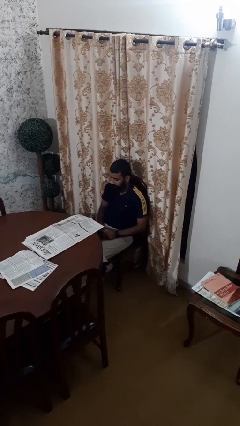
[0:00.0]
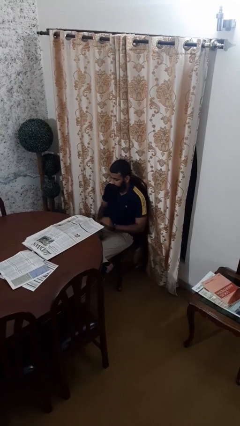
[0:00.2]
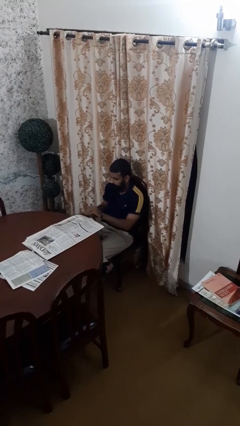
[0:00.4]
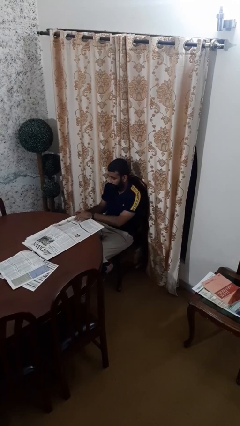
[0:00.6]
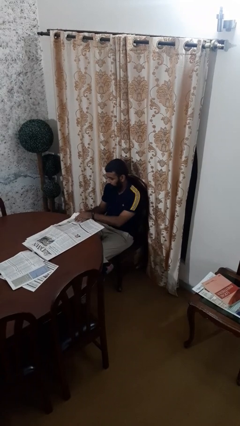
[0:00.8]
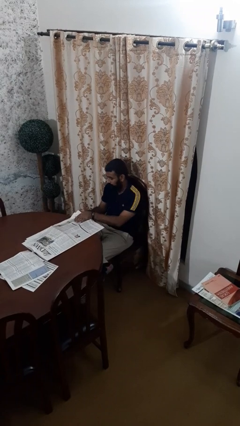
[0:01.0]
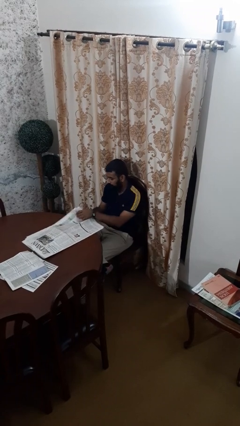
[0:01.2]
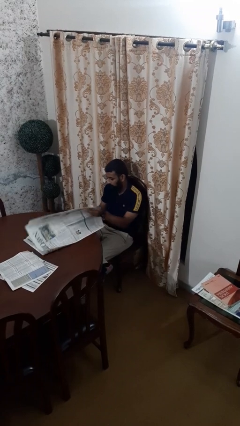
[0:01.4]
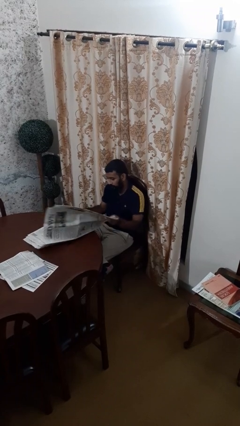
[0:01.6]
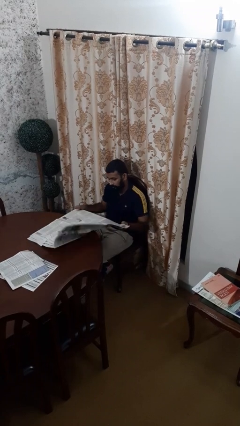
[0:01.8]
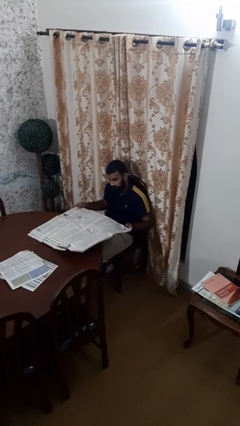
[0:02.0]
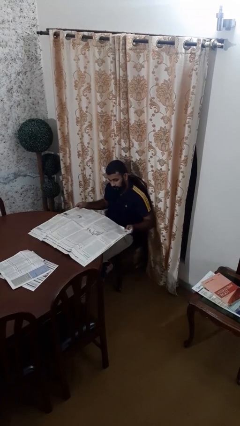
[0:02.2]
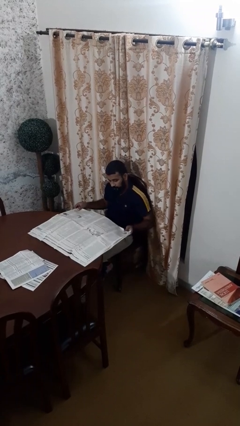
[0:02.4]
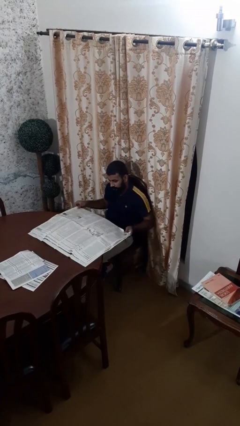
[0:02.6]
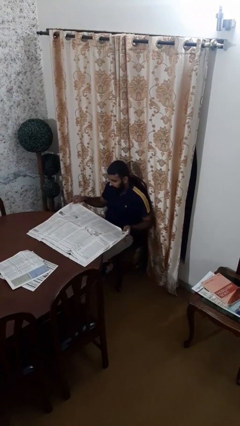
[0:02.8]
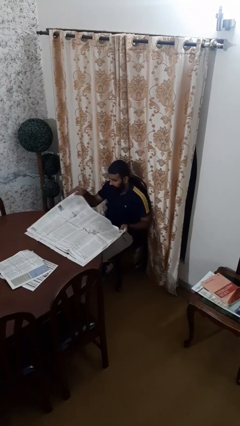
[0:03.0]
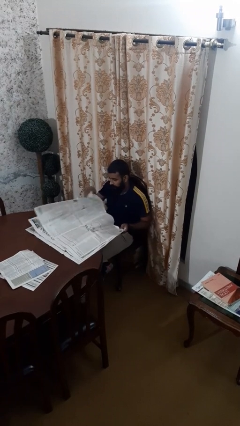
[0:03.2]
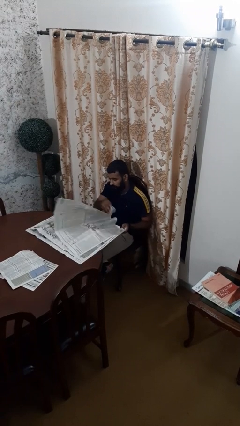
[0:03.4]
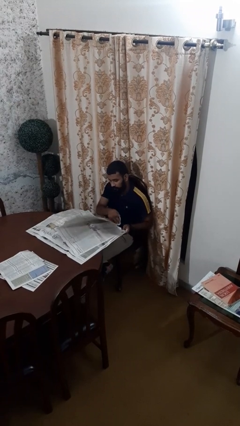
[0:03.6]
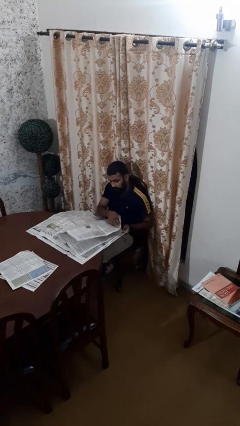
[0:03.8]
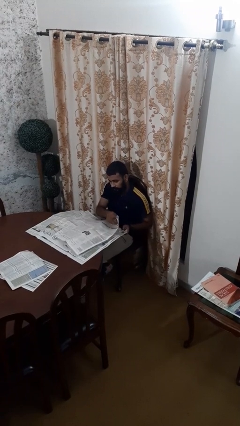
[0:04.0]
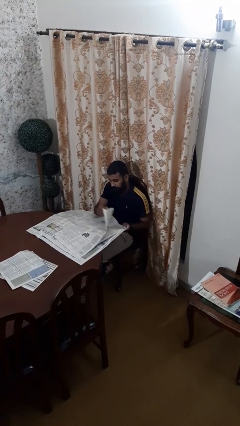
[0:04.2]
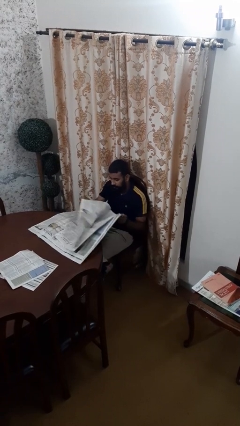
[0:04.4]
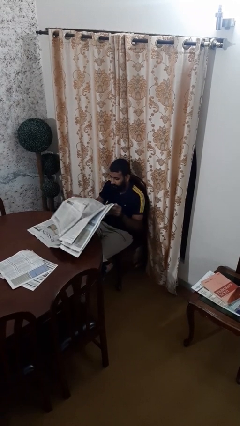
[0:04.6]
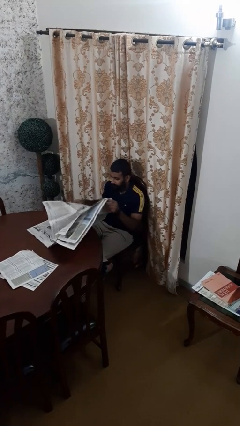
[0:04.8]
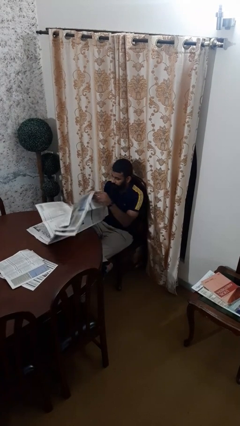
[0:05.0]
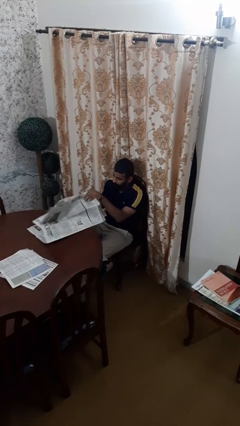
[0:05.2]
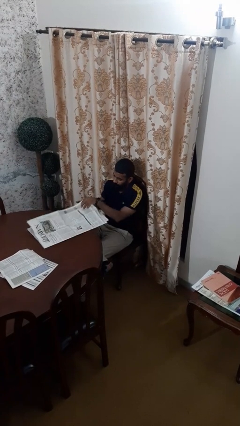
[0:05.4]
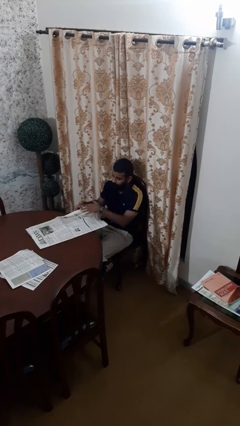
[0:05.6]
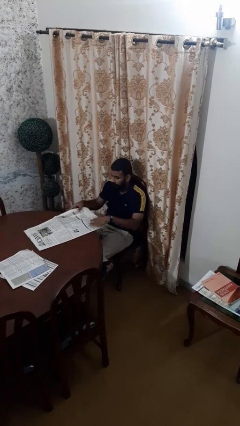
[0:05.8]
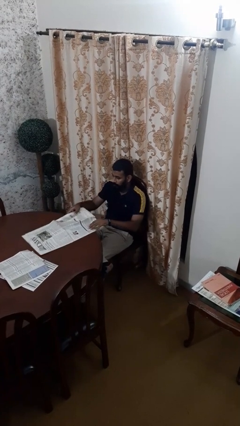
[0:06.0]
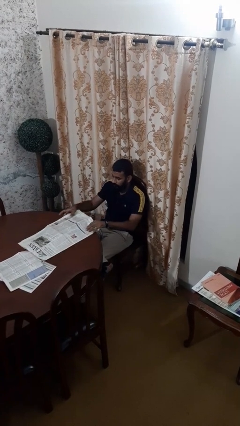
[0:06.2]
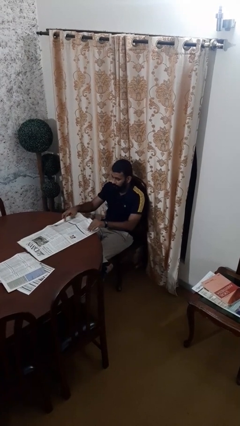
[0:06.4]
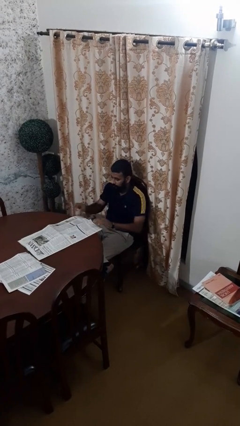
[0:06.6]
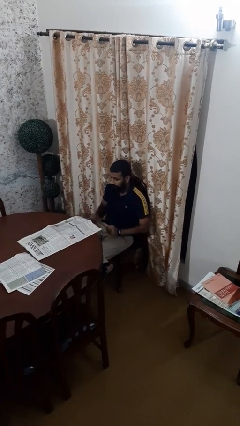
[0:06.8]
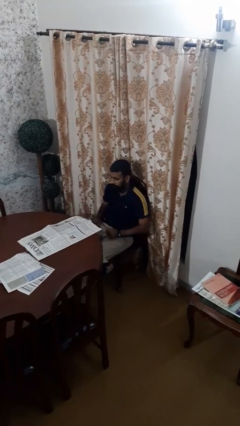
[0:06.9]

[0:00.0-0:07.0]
person reads newspaper

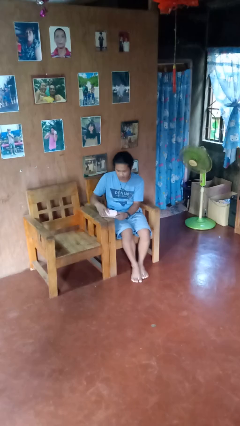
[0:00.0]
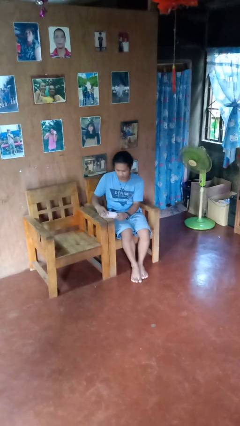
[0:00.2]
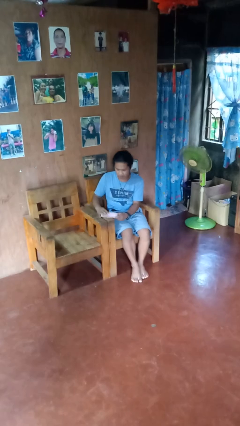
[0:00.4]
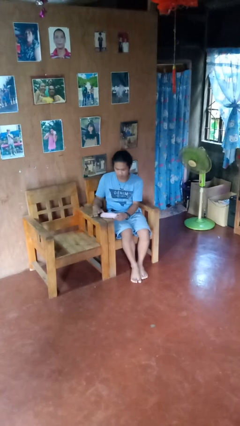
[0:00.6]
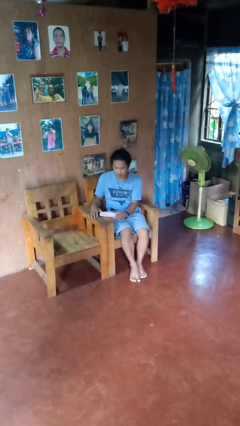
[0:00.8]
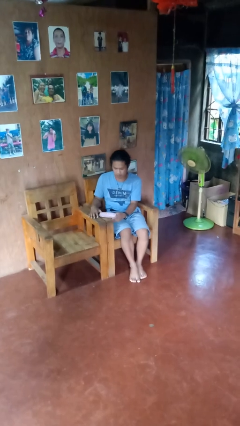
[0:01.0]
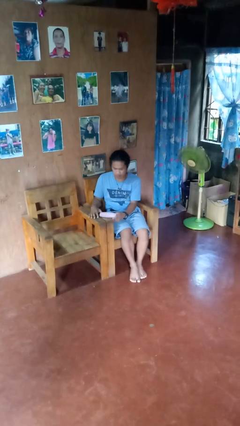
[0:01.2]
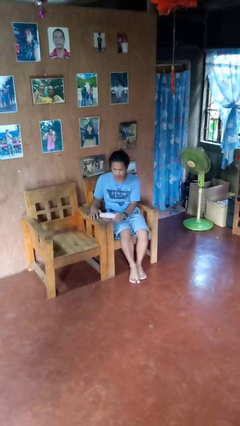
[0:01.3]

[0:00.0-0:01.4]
person closes jewelry box

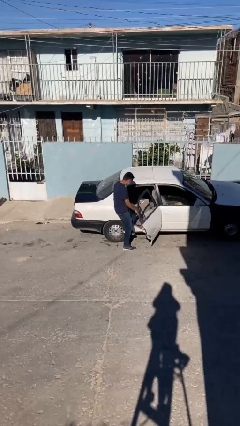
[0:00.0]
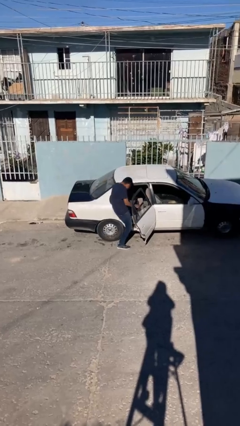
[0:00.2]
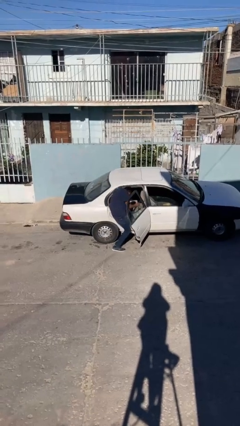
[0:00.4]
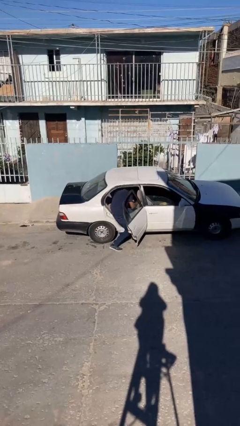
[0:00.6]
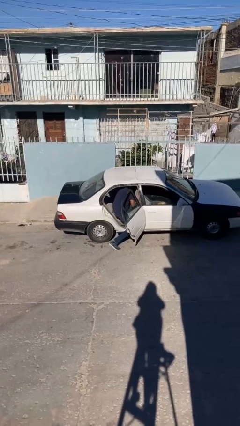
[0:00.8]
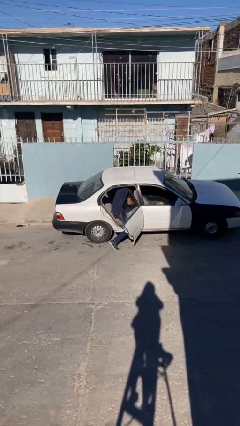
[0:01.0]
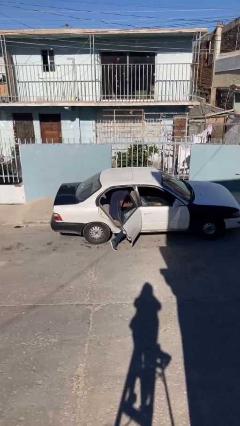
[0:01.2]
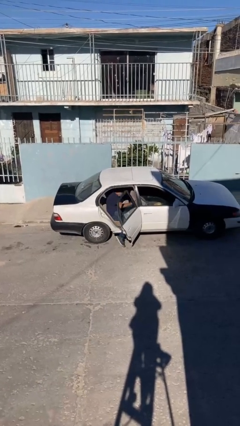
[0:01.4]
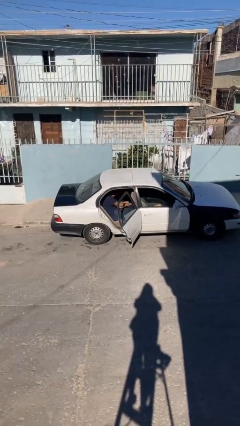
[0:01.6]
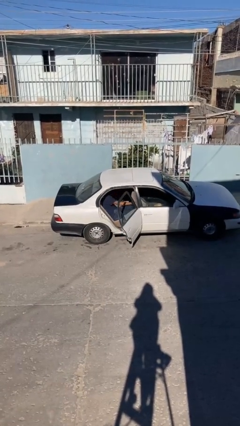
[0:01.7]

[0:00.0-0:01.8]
person enters car

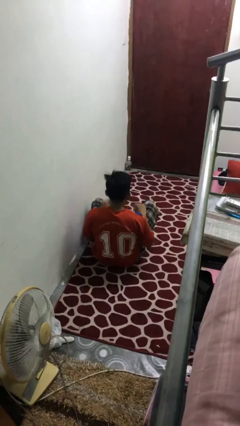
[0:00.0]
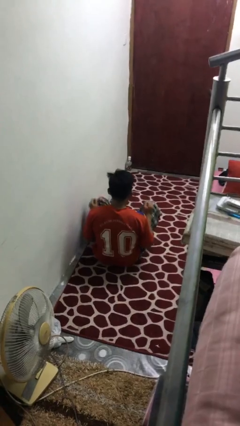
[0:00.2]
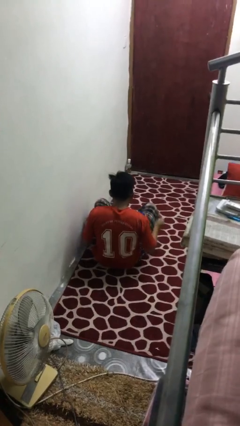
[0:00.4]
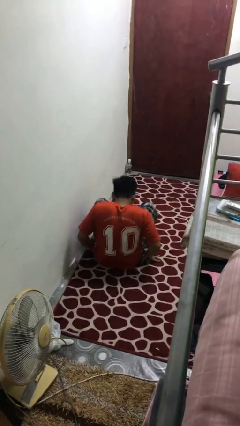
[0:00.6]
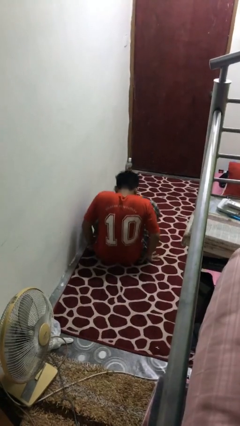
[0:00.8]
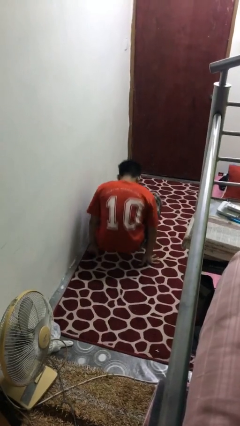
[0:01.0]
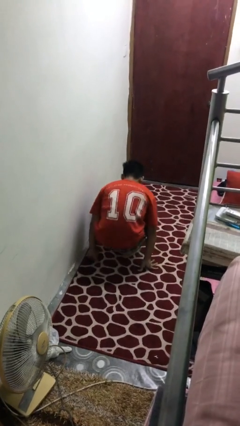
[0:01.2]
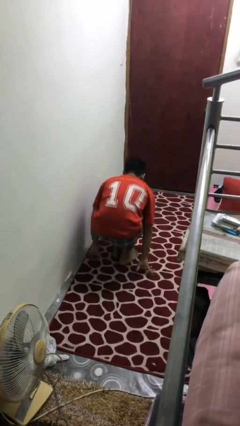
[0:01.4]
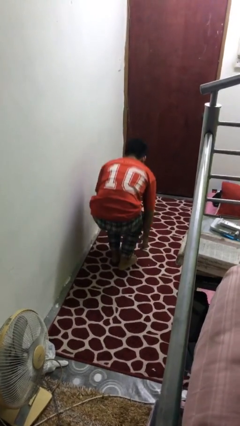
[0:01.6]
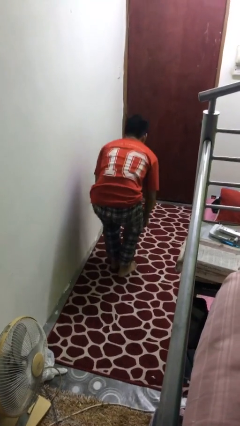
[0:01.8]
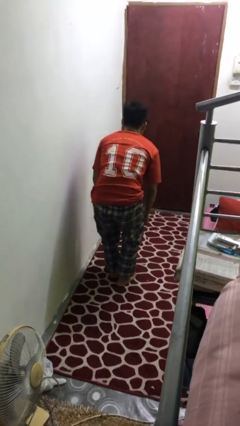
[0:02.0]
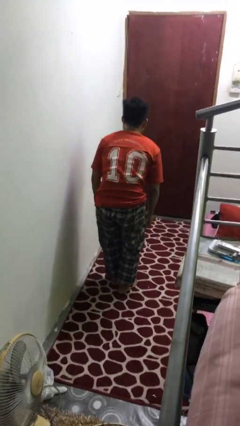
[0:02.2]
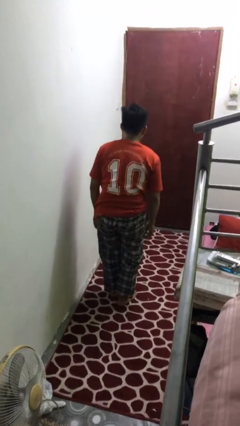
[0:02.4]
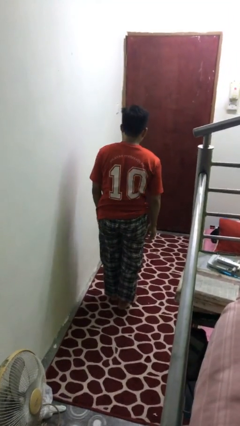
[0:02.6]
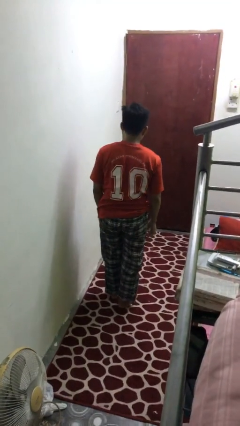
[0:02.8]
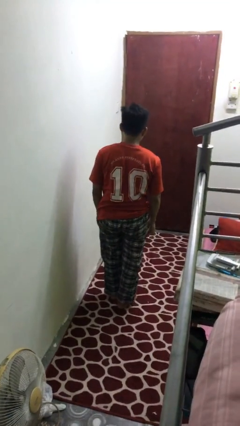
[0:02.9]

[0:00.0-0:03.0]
person stands up from floor

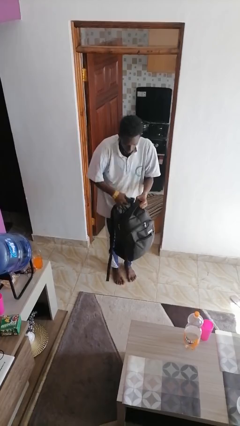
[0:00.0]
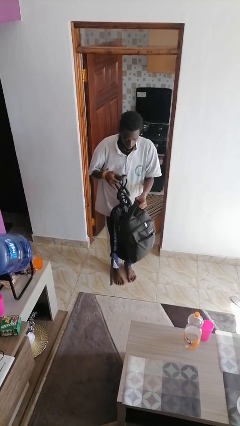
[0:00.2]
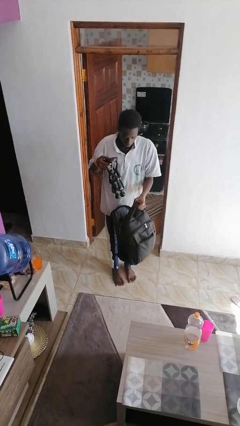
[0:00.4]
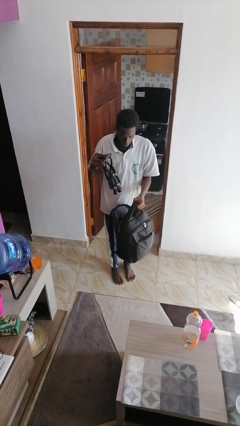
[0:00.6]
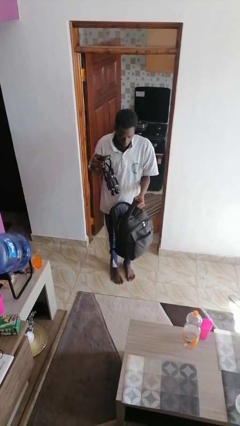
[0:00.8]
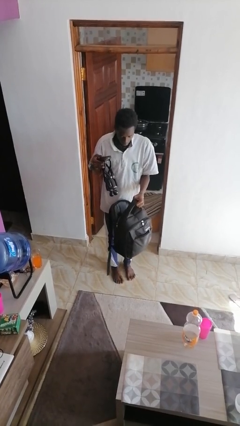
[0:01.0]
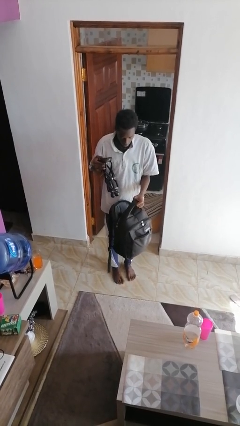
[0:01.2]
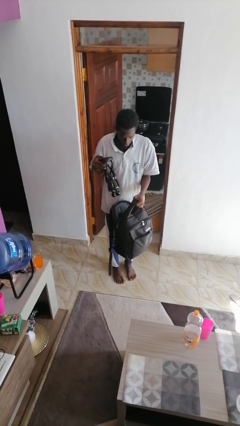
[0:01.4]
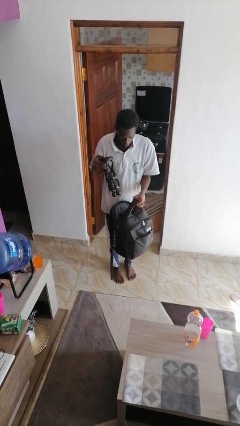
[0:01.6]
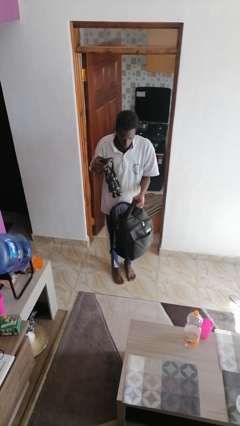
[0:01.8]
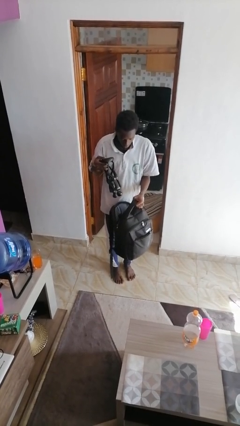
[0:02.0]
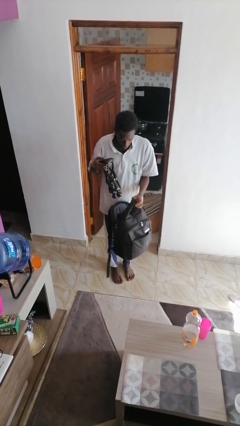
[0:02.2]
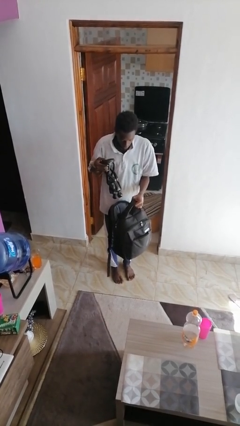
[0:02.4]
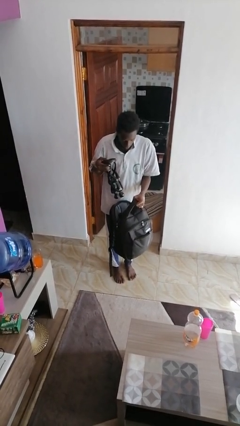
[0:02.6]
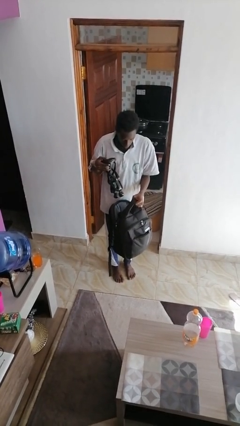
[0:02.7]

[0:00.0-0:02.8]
person takes object from backpack

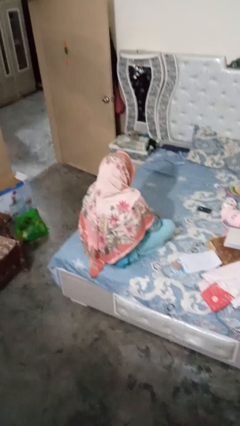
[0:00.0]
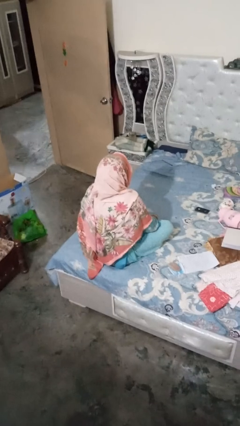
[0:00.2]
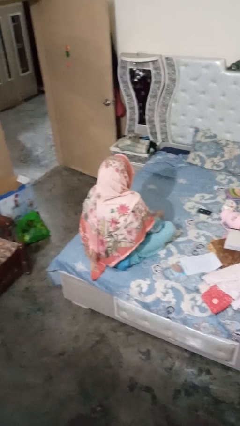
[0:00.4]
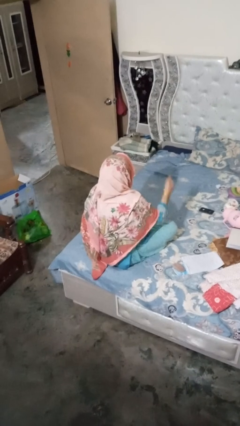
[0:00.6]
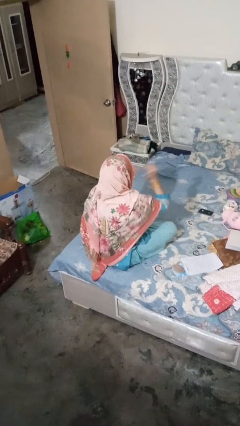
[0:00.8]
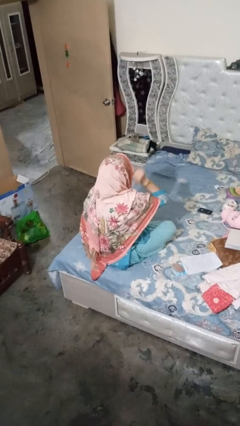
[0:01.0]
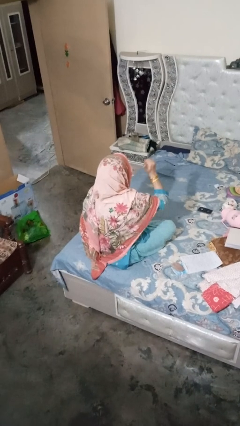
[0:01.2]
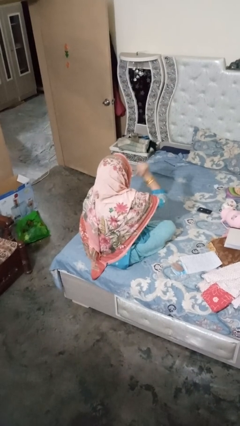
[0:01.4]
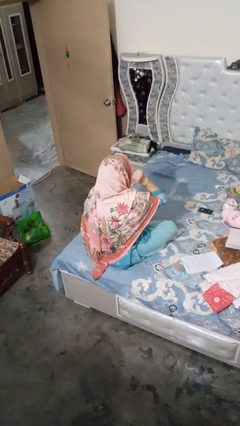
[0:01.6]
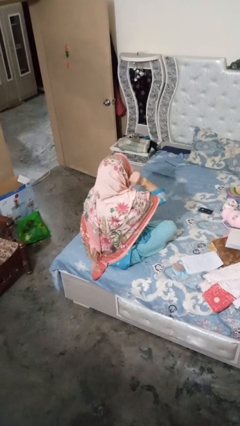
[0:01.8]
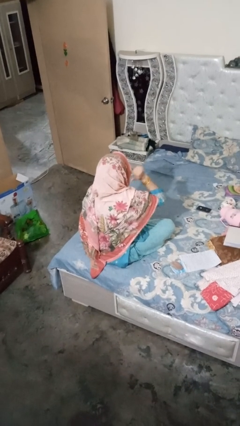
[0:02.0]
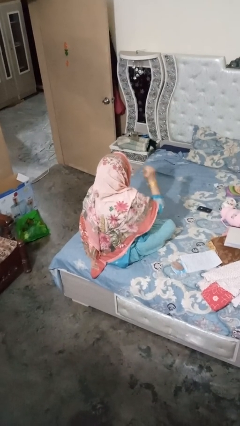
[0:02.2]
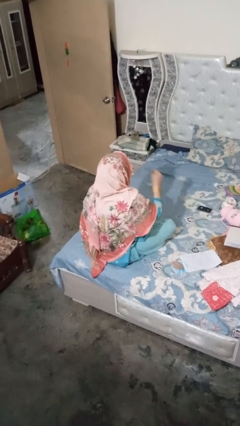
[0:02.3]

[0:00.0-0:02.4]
person gestures behind me
